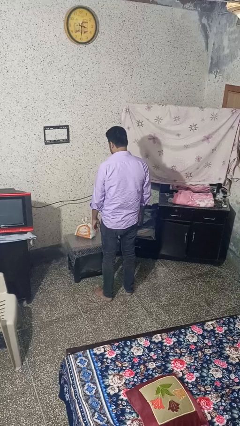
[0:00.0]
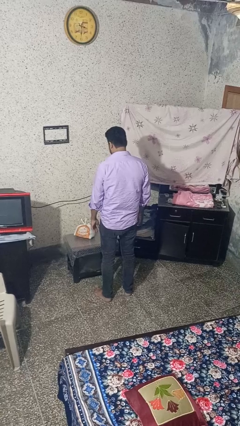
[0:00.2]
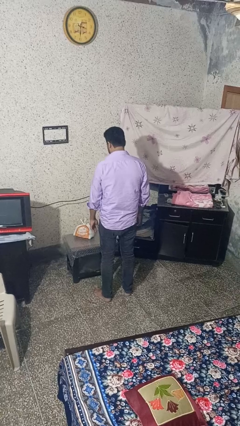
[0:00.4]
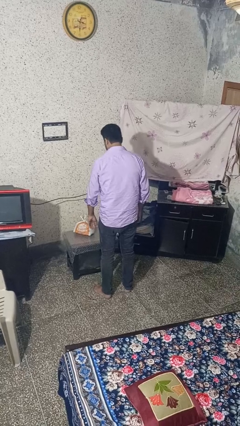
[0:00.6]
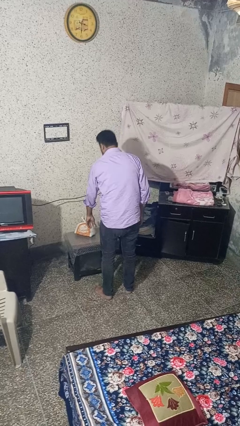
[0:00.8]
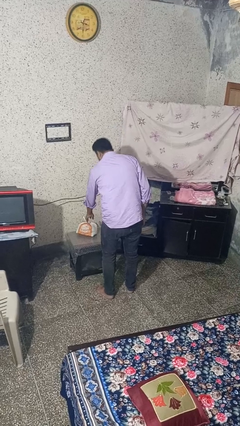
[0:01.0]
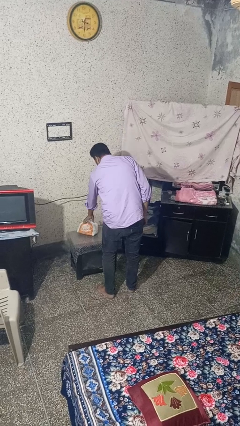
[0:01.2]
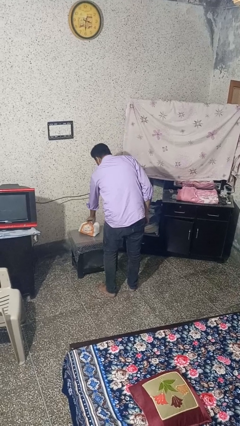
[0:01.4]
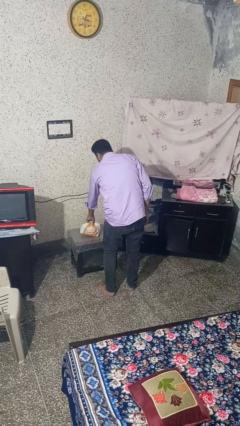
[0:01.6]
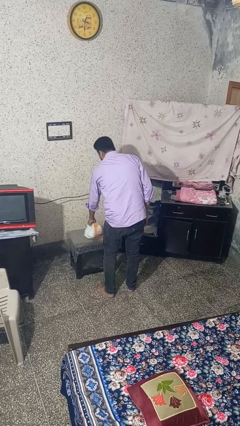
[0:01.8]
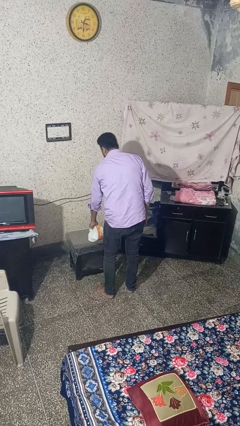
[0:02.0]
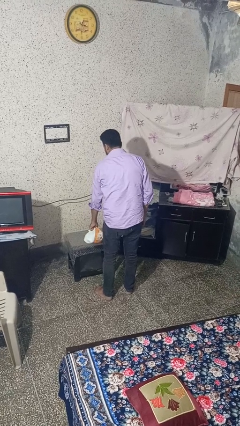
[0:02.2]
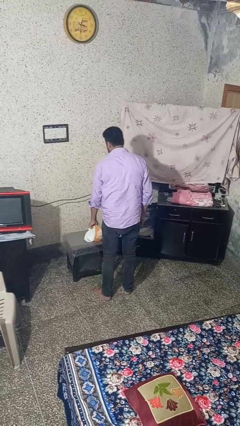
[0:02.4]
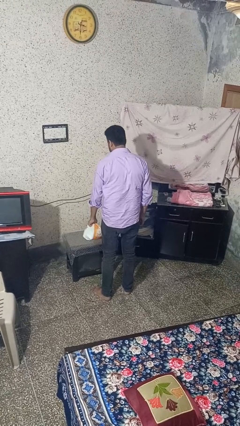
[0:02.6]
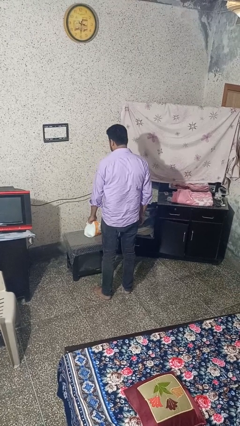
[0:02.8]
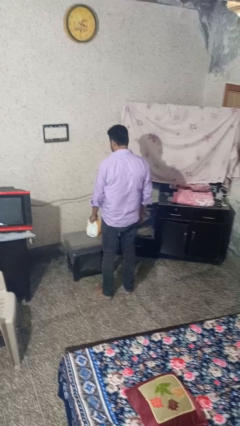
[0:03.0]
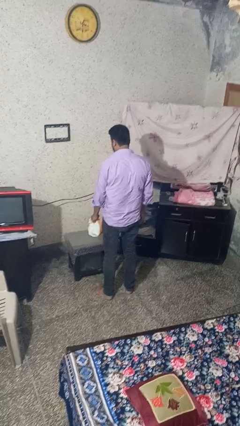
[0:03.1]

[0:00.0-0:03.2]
person picks up object from table

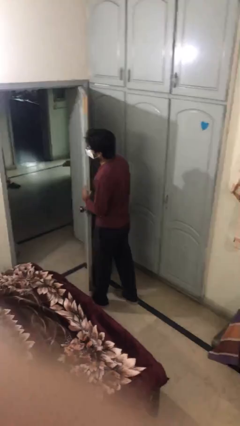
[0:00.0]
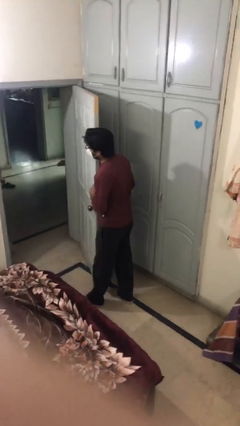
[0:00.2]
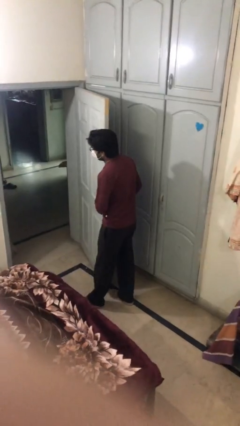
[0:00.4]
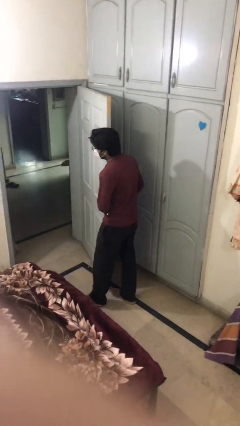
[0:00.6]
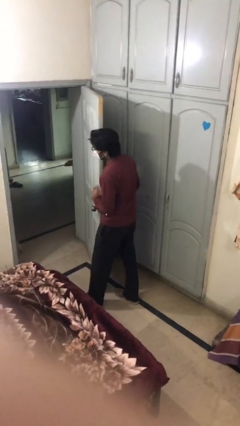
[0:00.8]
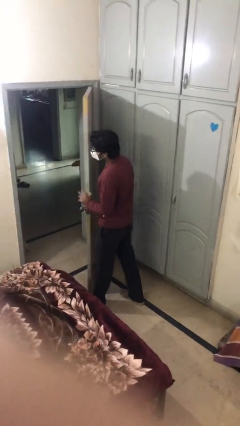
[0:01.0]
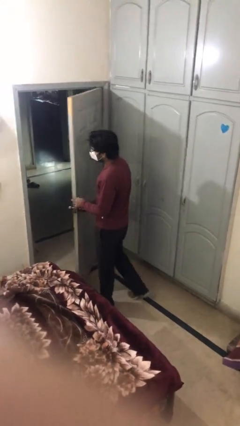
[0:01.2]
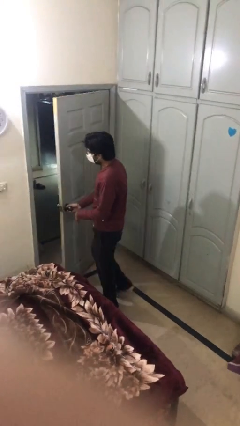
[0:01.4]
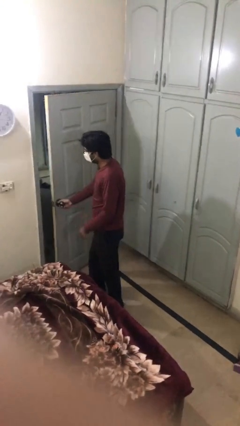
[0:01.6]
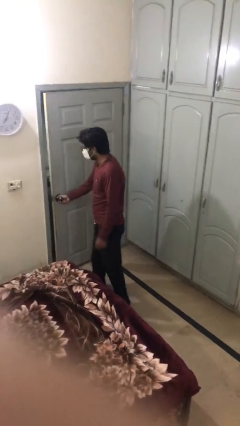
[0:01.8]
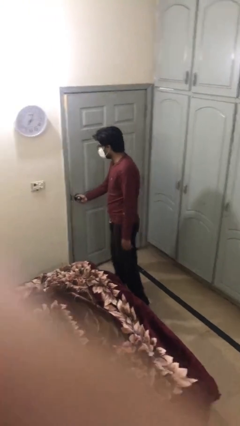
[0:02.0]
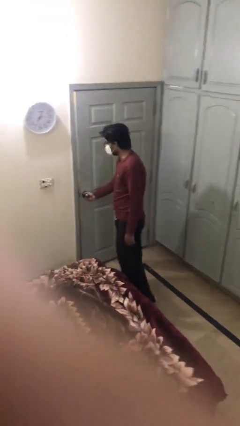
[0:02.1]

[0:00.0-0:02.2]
person closes facility door

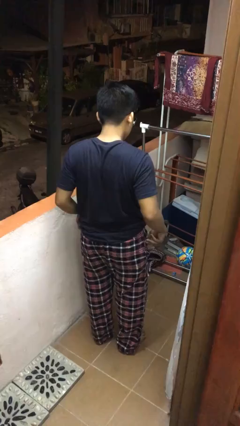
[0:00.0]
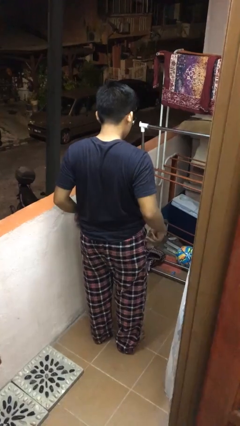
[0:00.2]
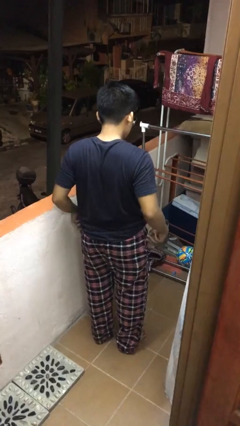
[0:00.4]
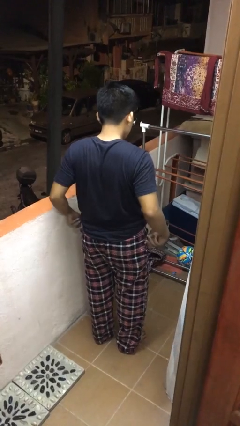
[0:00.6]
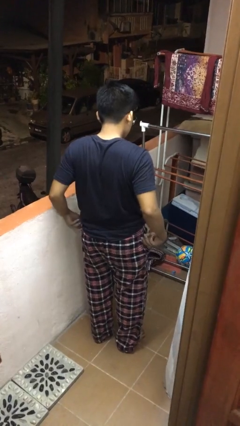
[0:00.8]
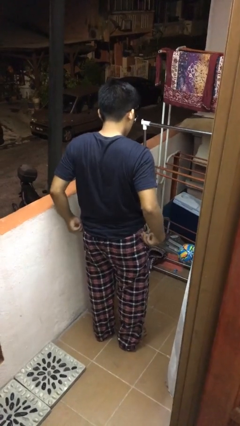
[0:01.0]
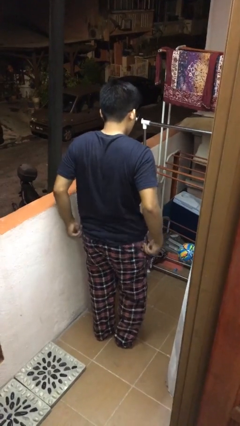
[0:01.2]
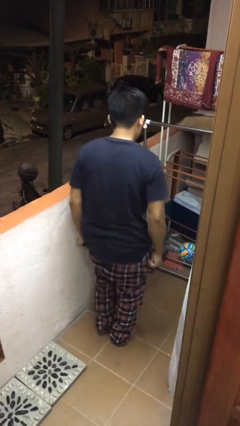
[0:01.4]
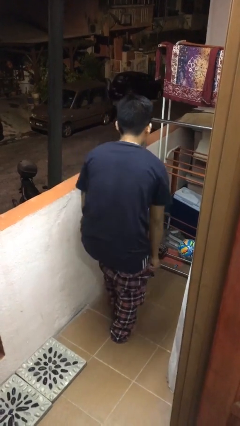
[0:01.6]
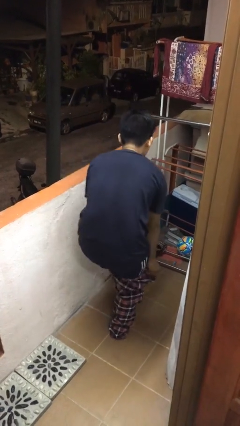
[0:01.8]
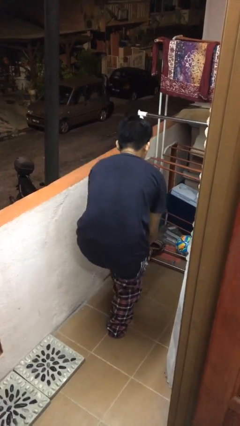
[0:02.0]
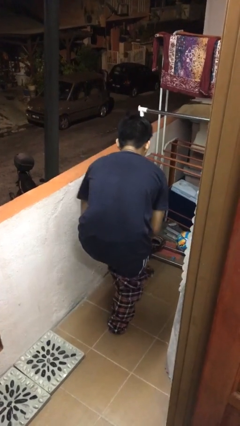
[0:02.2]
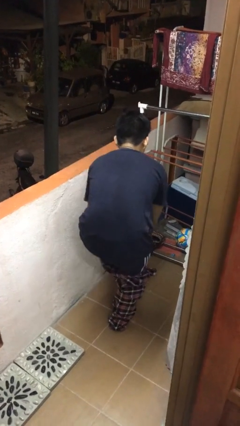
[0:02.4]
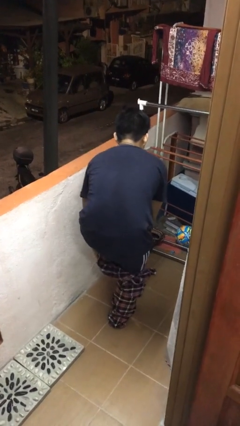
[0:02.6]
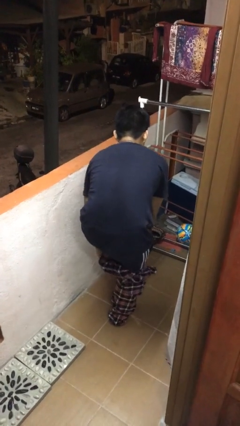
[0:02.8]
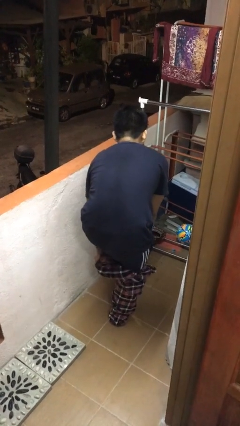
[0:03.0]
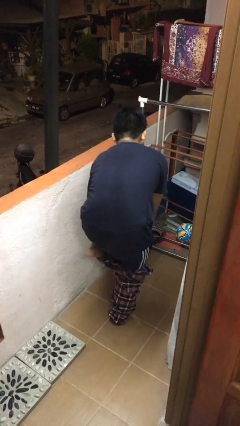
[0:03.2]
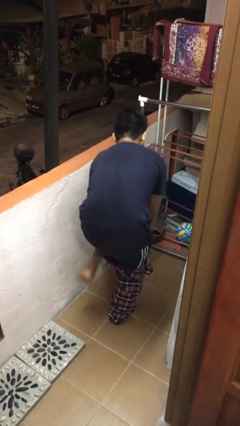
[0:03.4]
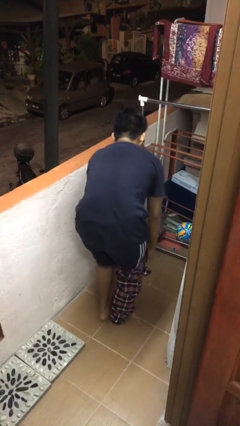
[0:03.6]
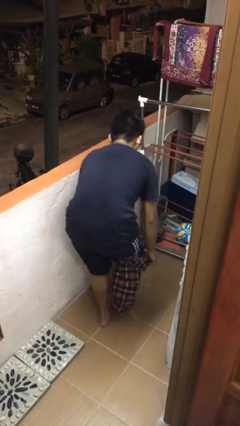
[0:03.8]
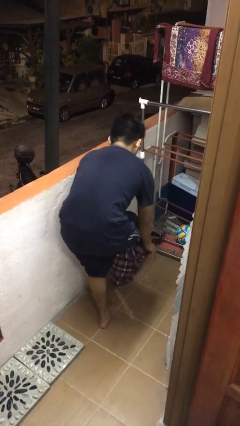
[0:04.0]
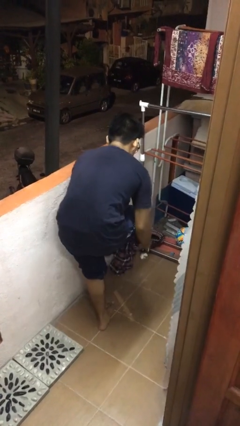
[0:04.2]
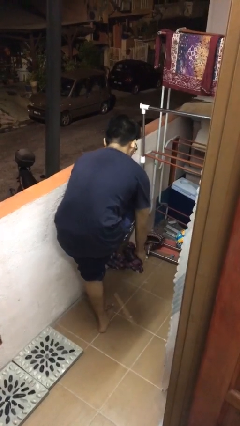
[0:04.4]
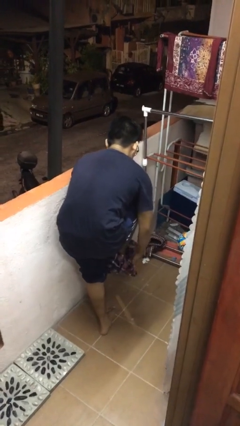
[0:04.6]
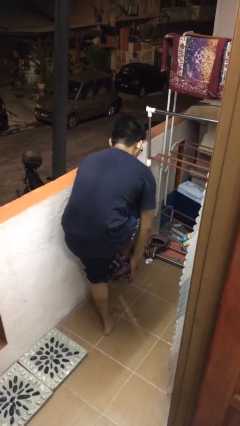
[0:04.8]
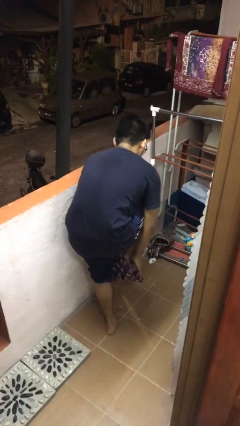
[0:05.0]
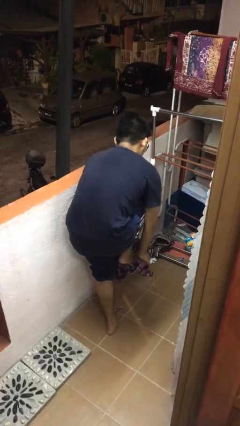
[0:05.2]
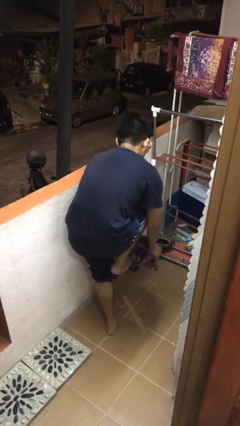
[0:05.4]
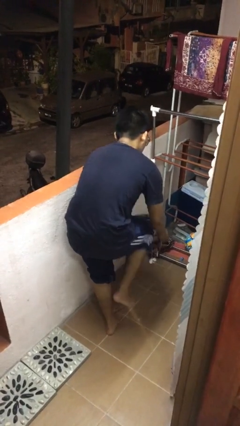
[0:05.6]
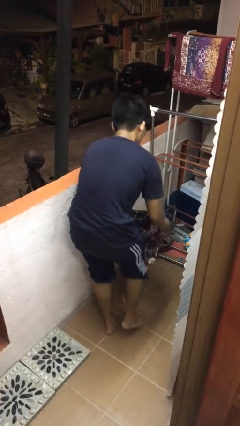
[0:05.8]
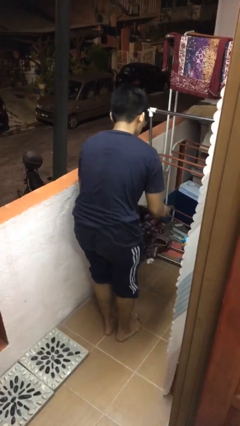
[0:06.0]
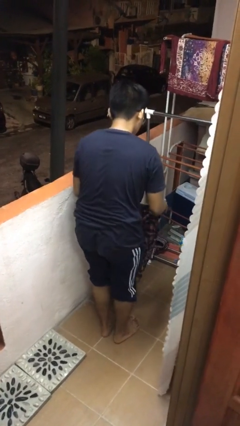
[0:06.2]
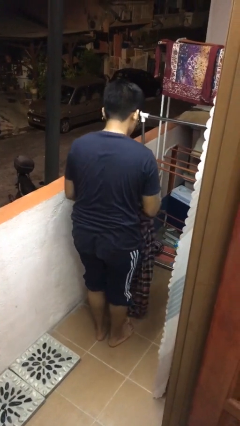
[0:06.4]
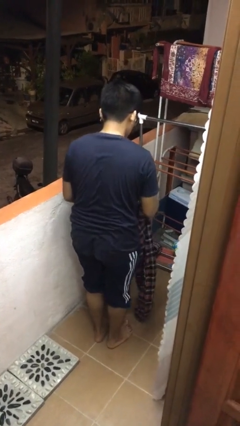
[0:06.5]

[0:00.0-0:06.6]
person takes off pants

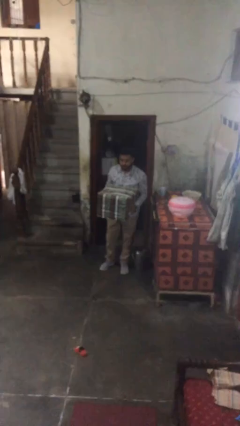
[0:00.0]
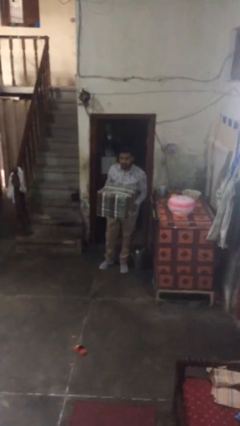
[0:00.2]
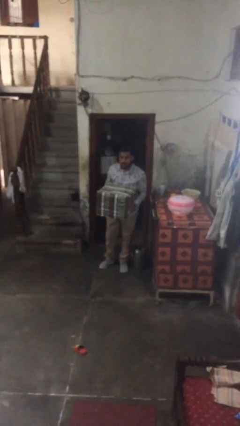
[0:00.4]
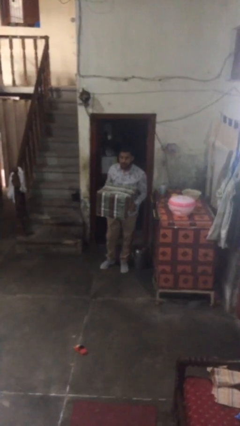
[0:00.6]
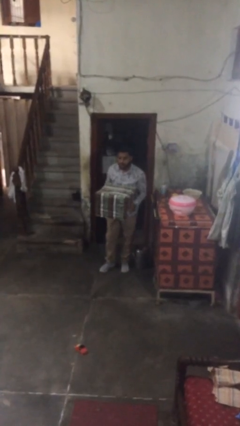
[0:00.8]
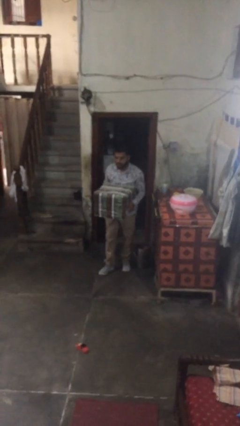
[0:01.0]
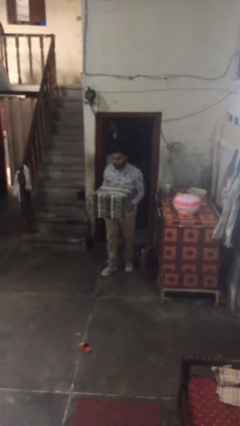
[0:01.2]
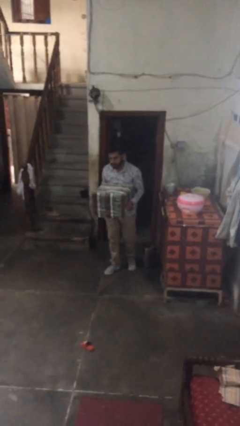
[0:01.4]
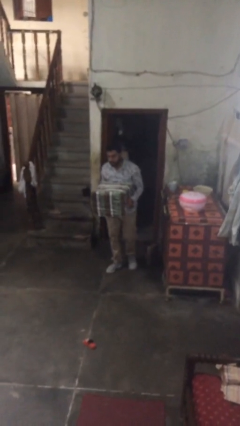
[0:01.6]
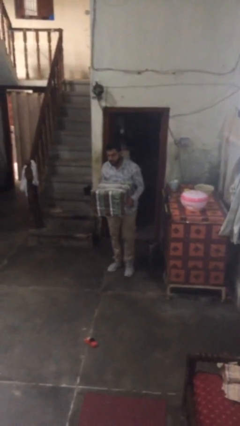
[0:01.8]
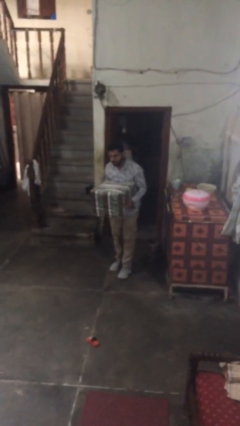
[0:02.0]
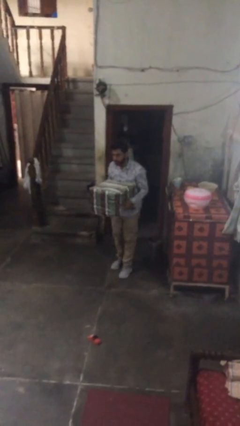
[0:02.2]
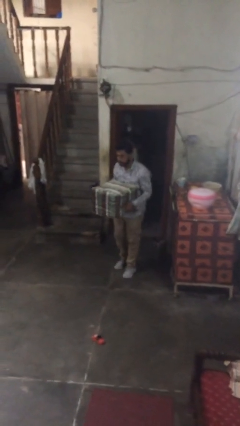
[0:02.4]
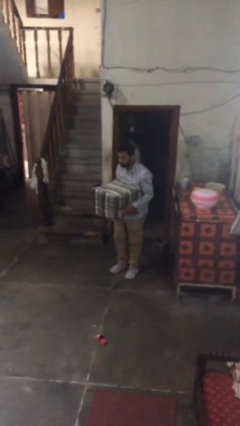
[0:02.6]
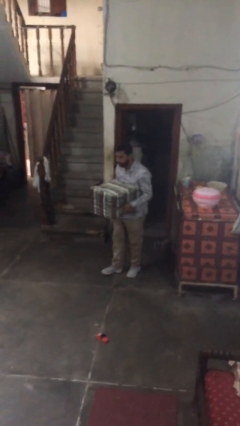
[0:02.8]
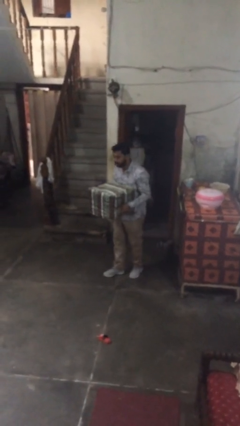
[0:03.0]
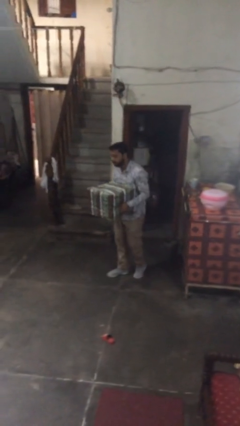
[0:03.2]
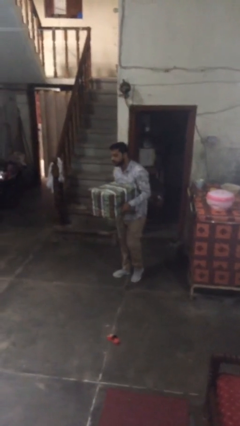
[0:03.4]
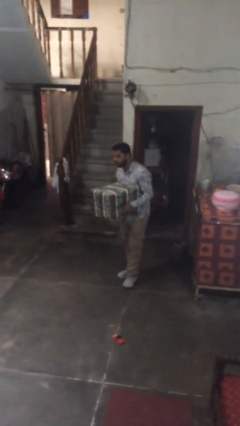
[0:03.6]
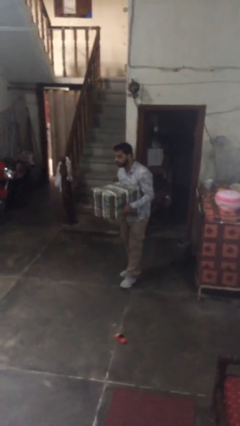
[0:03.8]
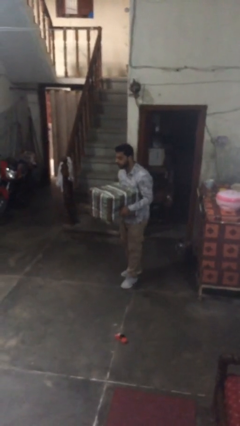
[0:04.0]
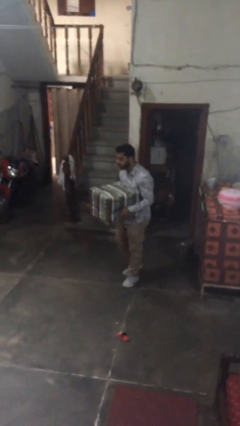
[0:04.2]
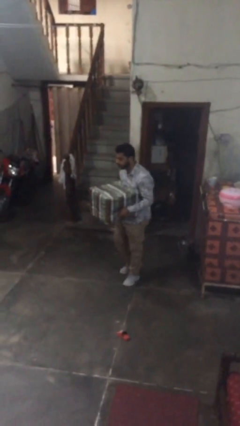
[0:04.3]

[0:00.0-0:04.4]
person carries heavy object

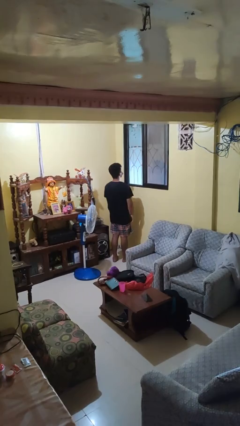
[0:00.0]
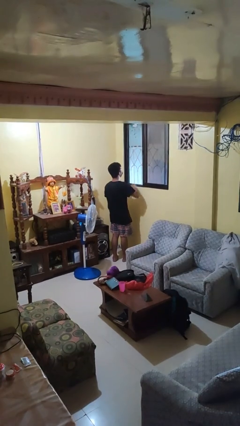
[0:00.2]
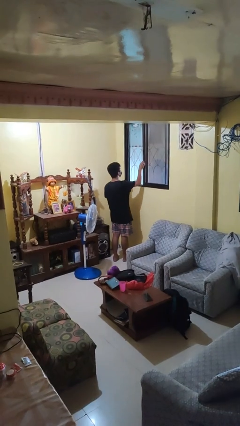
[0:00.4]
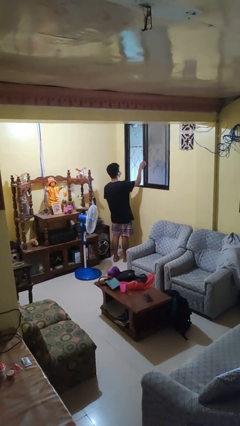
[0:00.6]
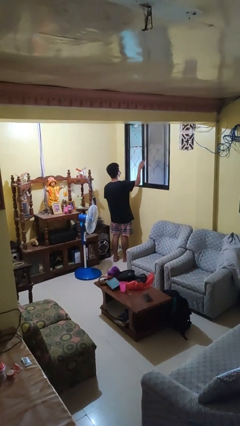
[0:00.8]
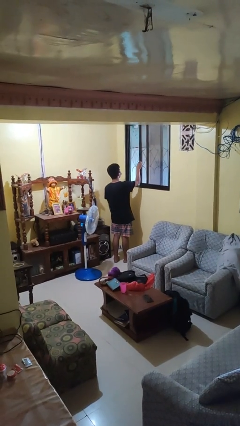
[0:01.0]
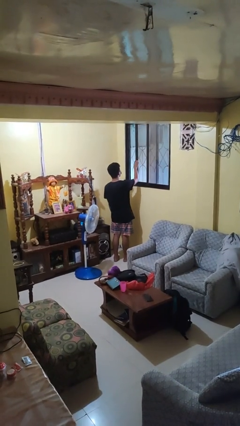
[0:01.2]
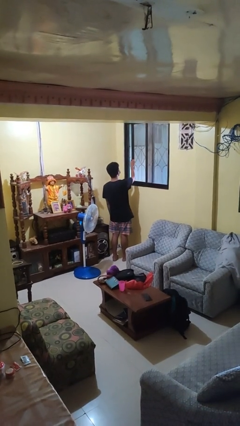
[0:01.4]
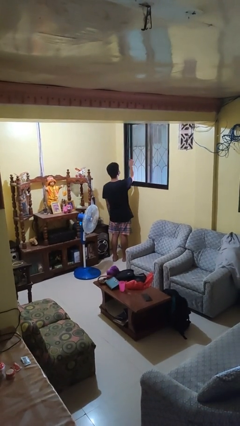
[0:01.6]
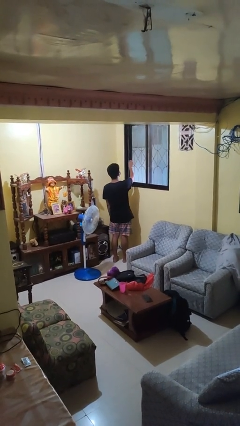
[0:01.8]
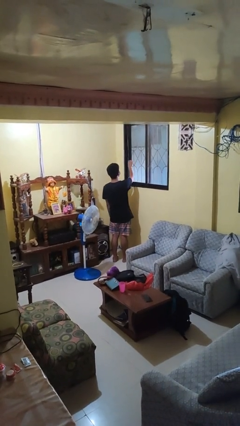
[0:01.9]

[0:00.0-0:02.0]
person closes home window
